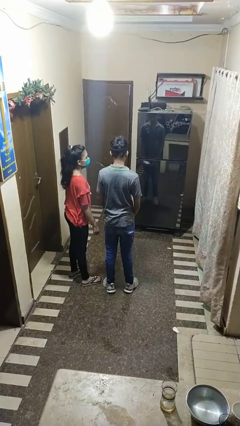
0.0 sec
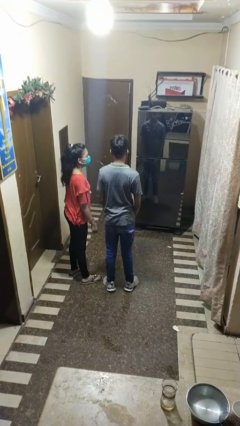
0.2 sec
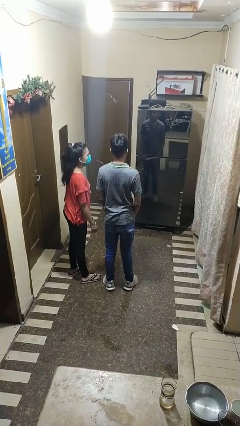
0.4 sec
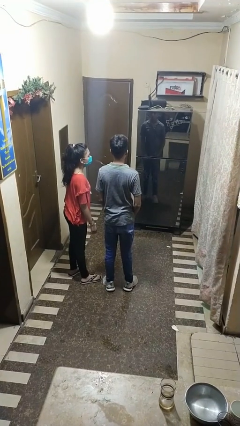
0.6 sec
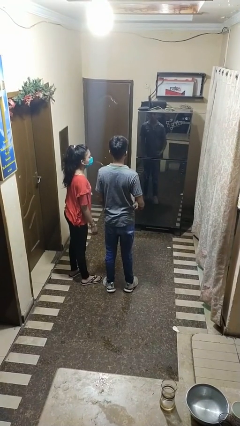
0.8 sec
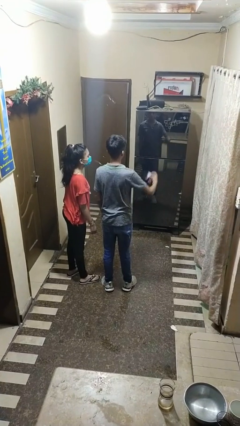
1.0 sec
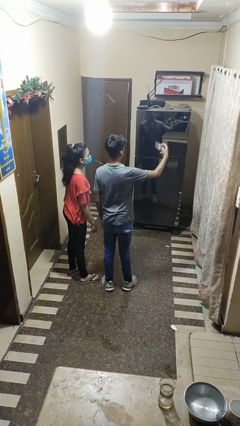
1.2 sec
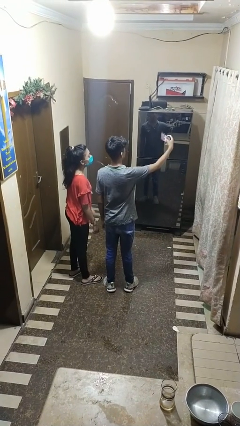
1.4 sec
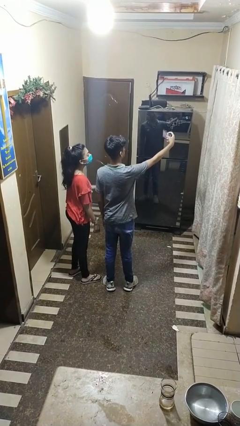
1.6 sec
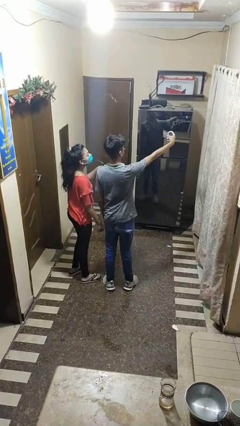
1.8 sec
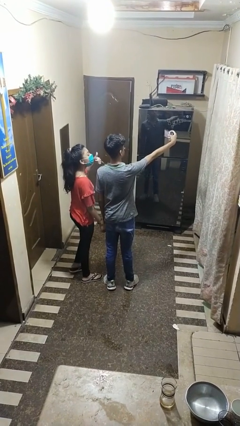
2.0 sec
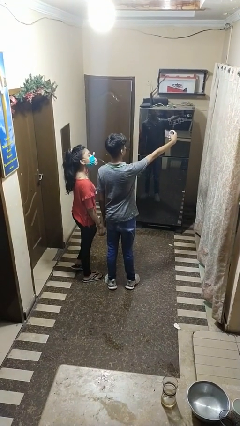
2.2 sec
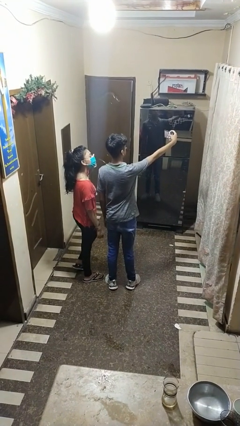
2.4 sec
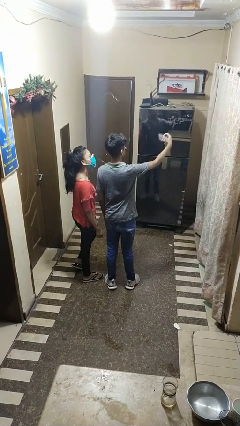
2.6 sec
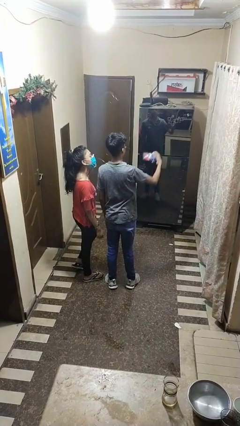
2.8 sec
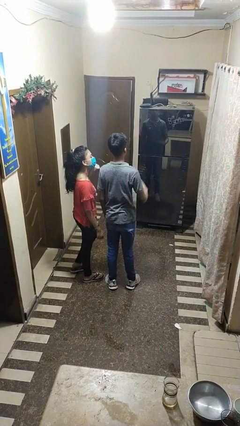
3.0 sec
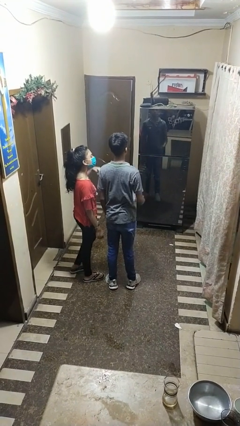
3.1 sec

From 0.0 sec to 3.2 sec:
person takes selfie with person

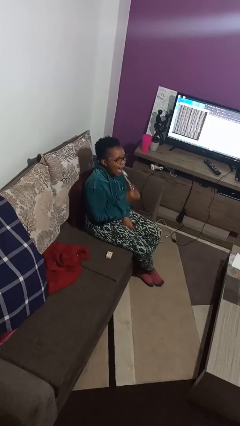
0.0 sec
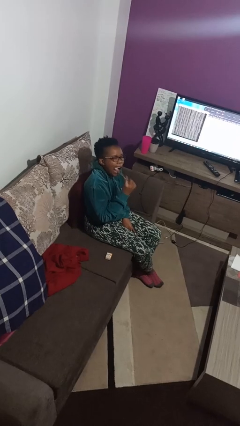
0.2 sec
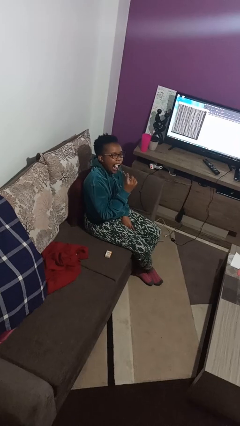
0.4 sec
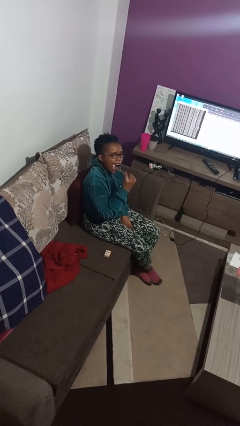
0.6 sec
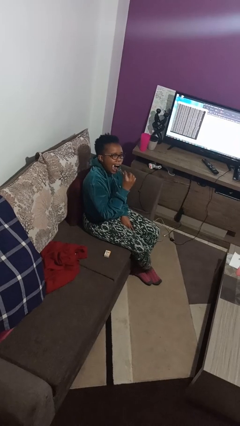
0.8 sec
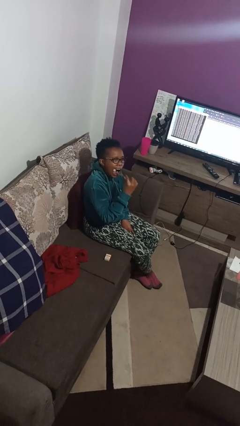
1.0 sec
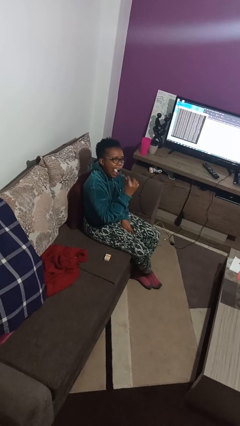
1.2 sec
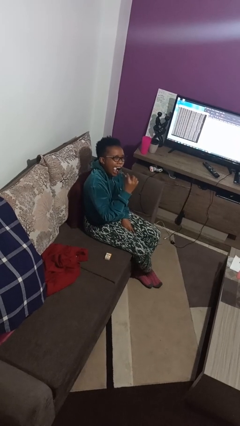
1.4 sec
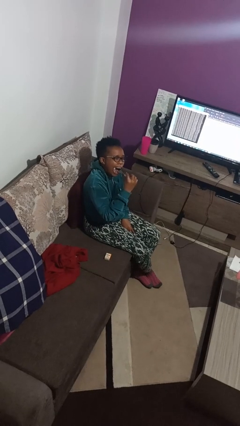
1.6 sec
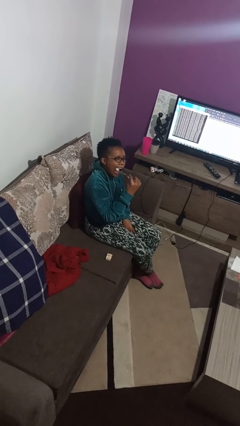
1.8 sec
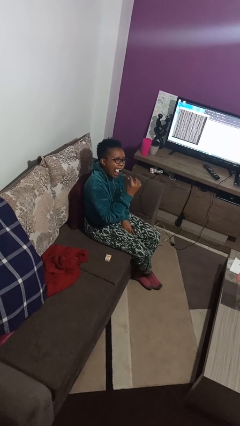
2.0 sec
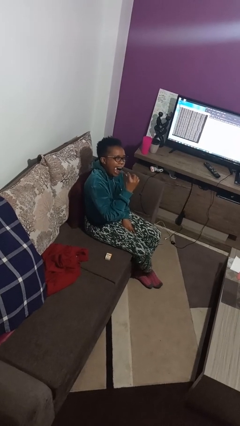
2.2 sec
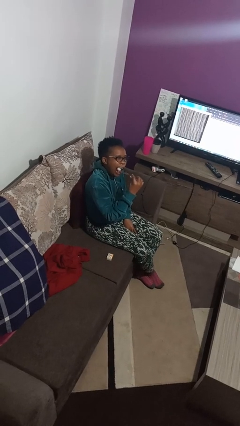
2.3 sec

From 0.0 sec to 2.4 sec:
person brushes teeth

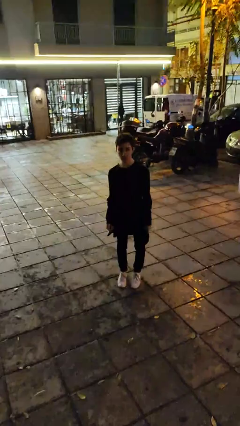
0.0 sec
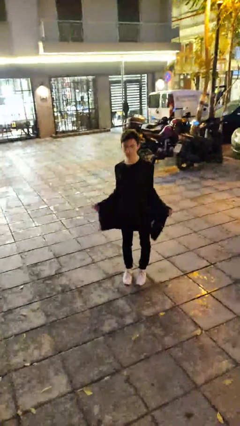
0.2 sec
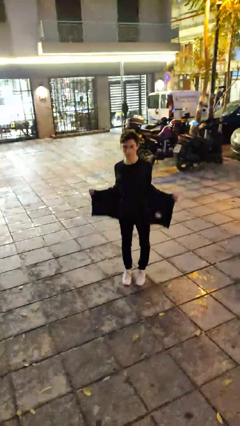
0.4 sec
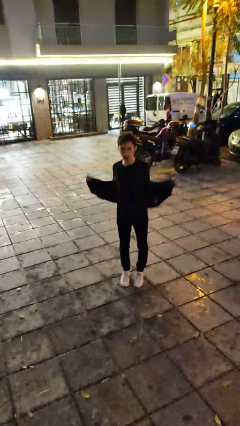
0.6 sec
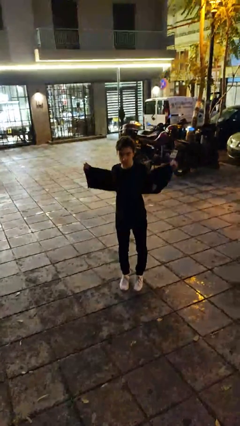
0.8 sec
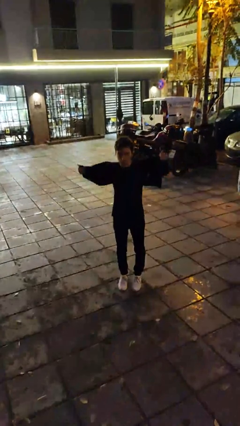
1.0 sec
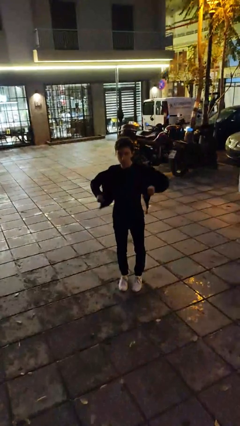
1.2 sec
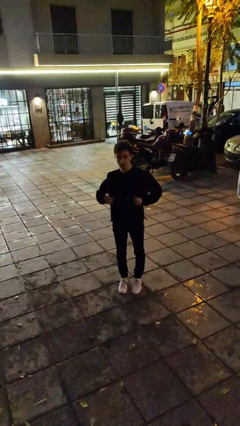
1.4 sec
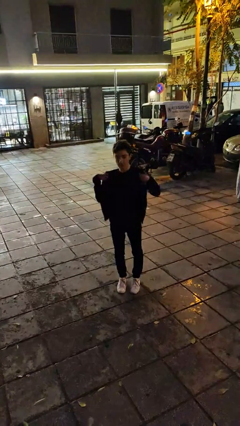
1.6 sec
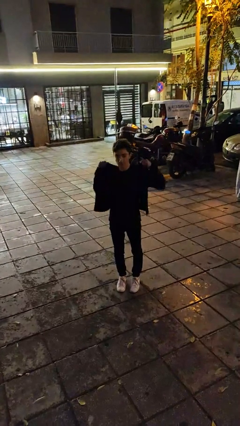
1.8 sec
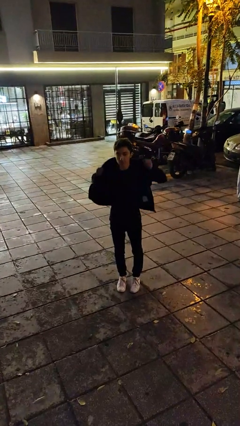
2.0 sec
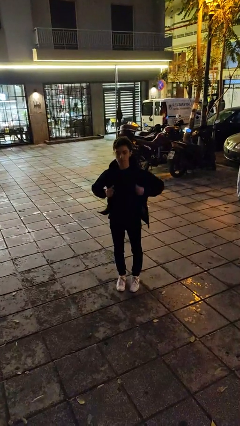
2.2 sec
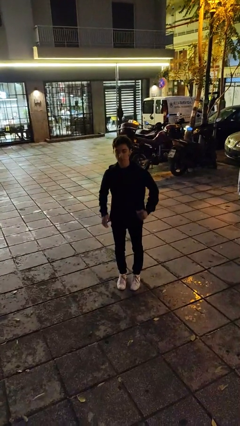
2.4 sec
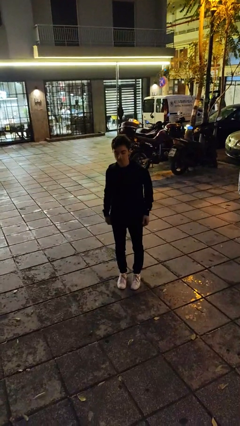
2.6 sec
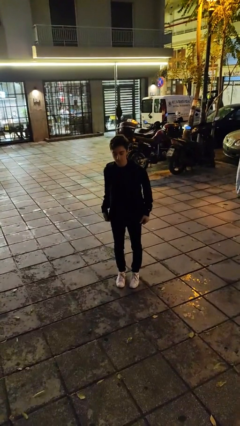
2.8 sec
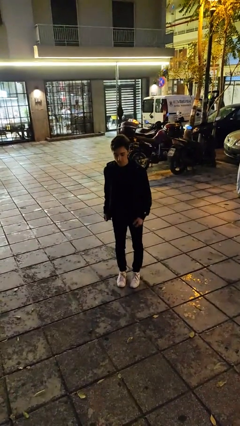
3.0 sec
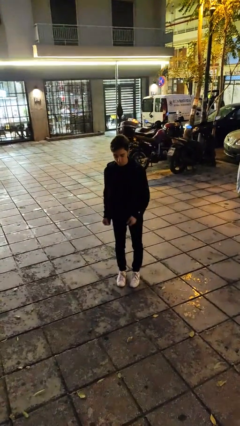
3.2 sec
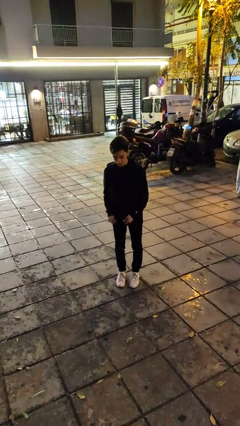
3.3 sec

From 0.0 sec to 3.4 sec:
person puts on jacket

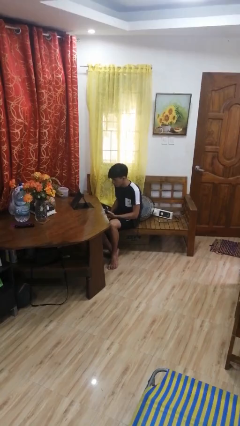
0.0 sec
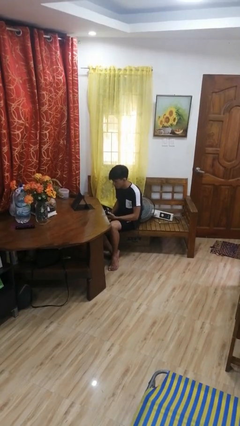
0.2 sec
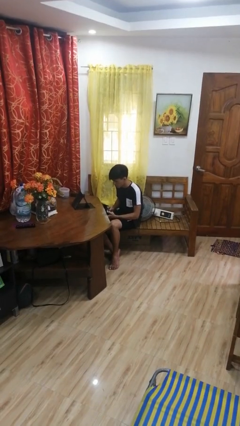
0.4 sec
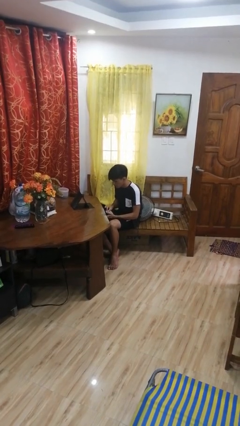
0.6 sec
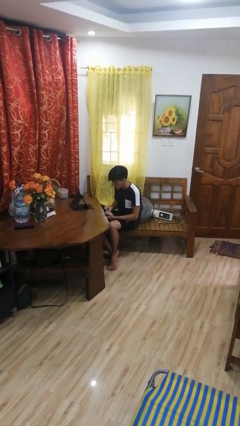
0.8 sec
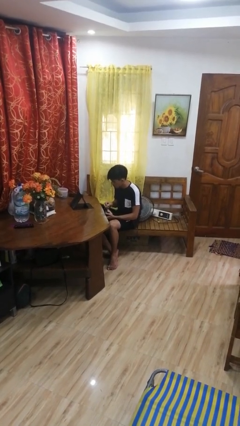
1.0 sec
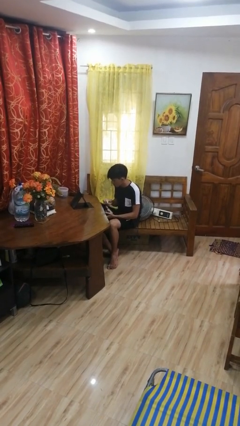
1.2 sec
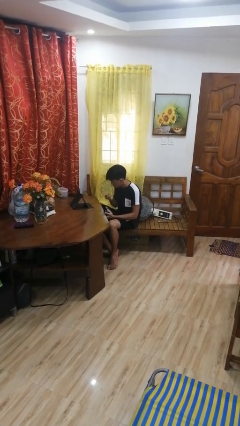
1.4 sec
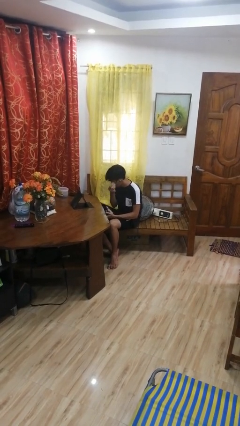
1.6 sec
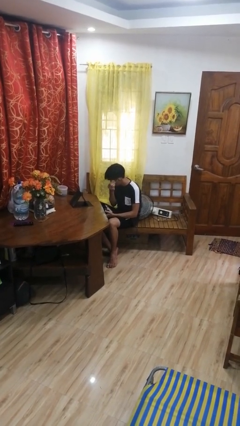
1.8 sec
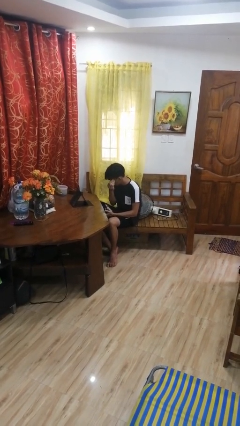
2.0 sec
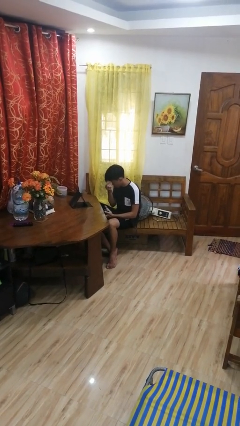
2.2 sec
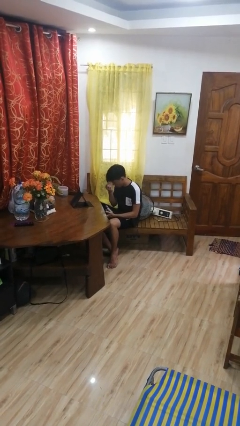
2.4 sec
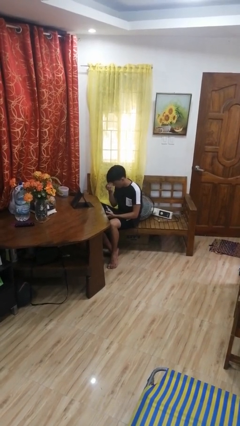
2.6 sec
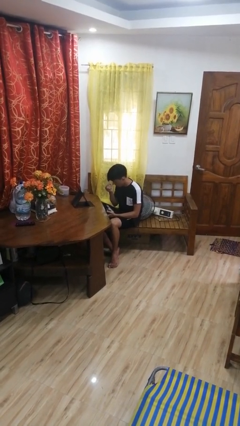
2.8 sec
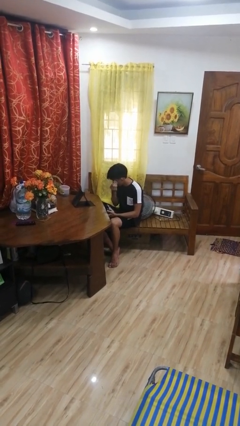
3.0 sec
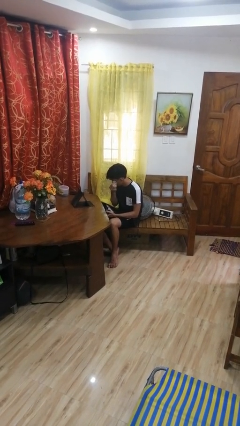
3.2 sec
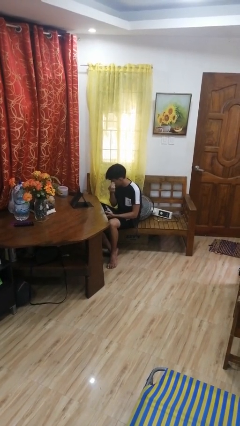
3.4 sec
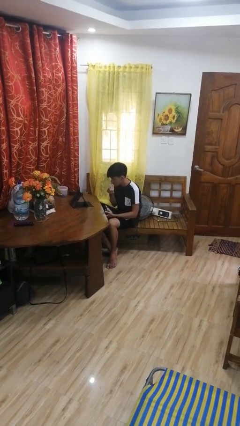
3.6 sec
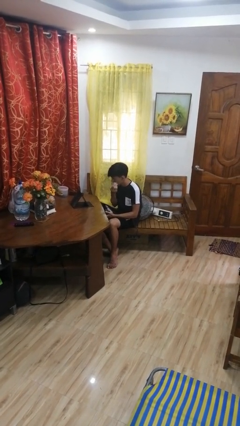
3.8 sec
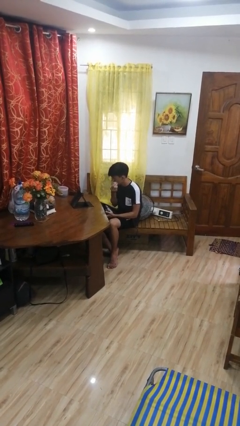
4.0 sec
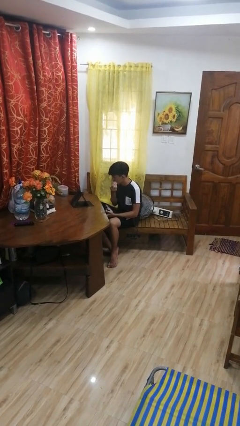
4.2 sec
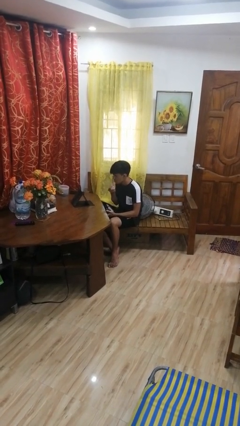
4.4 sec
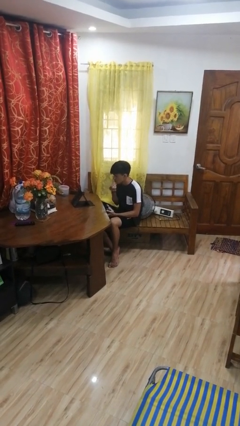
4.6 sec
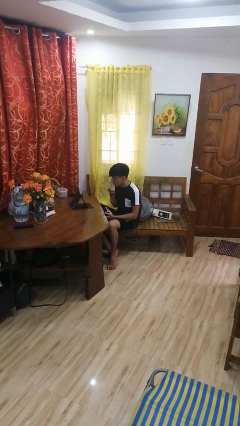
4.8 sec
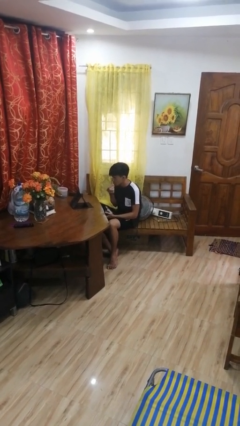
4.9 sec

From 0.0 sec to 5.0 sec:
person applies eye makeup

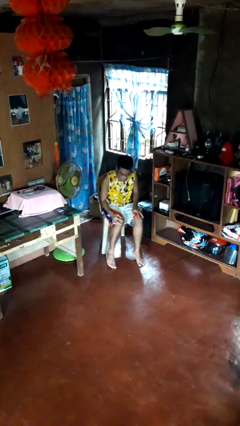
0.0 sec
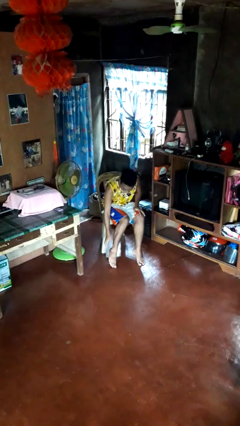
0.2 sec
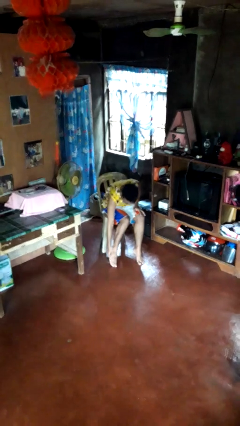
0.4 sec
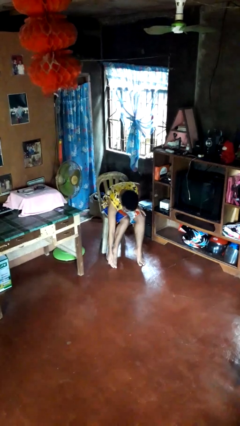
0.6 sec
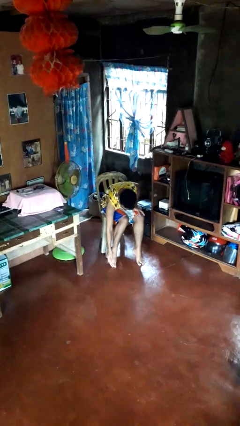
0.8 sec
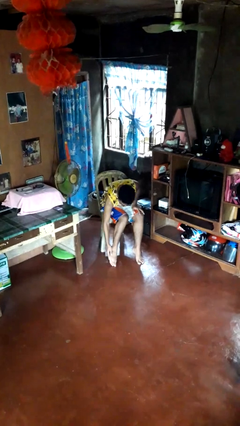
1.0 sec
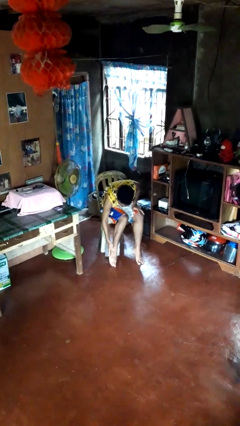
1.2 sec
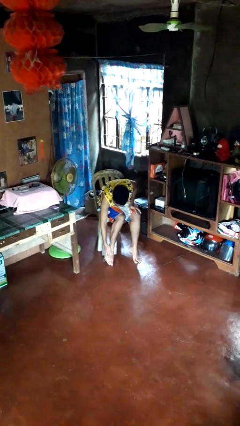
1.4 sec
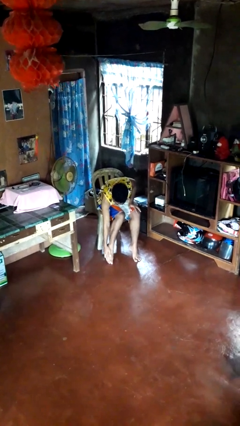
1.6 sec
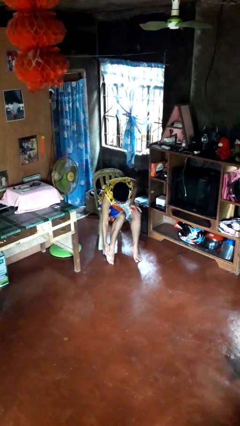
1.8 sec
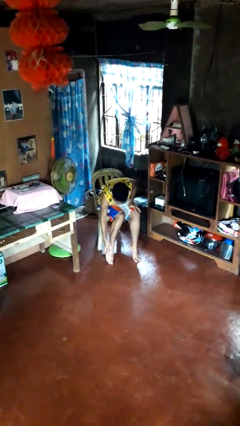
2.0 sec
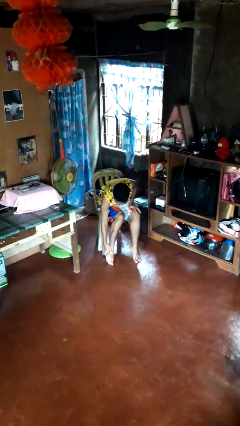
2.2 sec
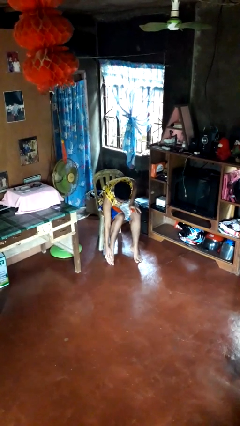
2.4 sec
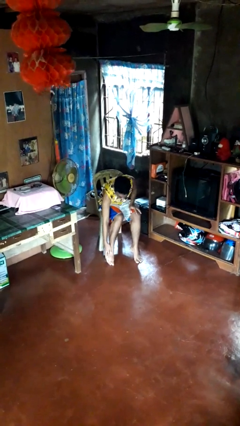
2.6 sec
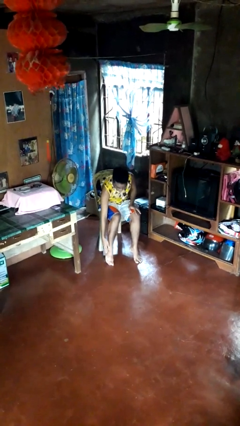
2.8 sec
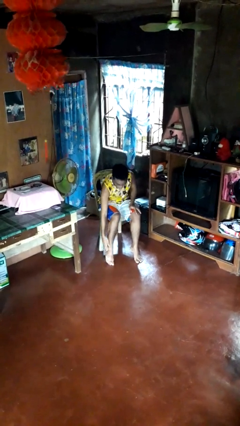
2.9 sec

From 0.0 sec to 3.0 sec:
person rubs foot

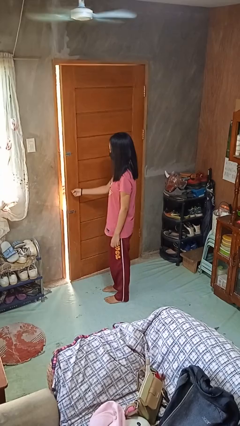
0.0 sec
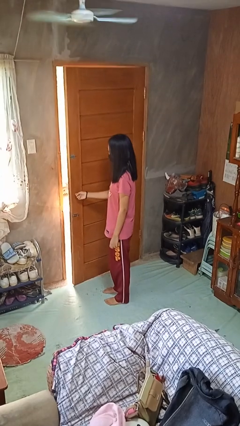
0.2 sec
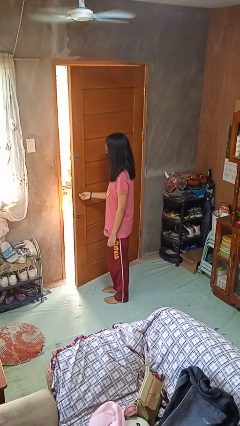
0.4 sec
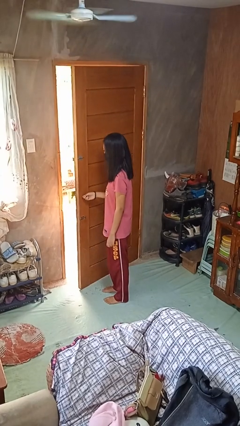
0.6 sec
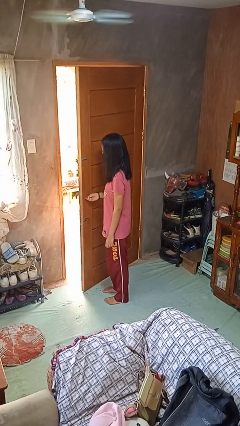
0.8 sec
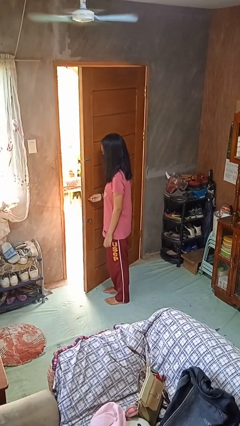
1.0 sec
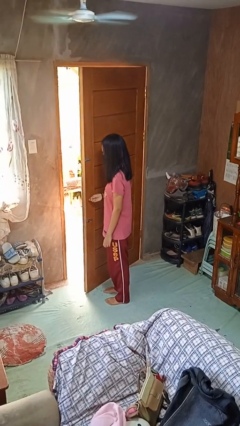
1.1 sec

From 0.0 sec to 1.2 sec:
person opens facility door
